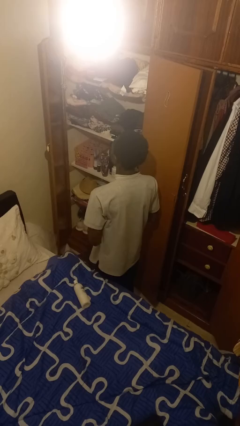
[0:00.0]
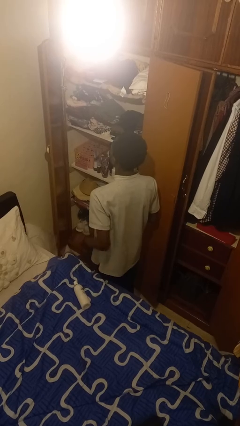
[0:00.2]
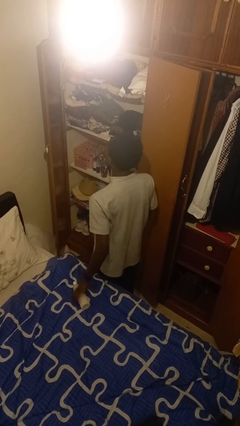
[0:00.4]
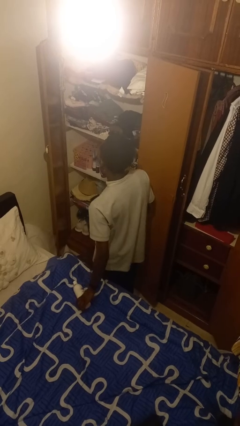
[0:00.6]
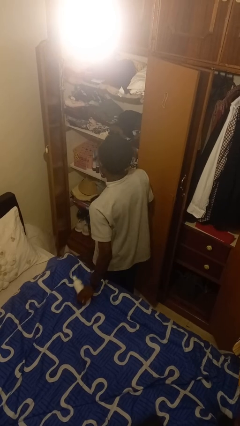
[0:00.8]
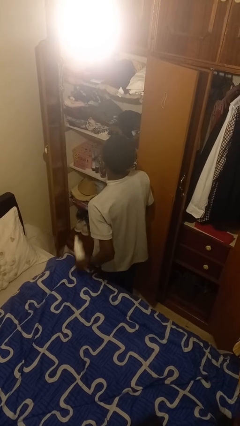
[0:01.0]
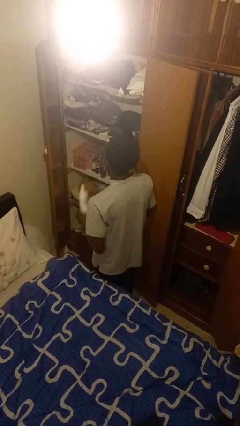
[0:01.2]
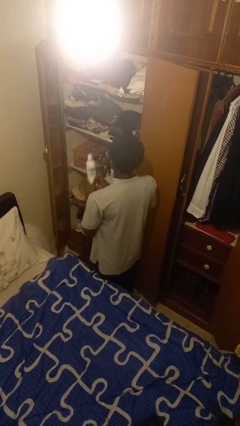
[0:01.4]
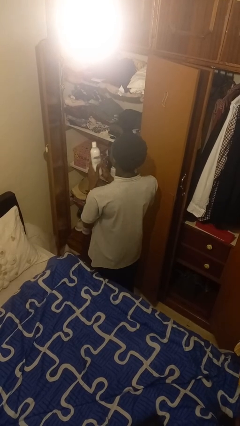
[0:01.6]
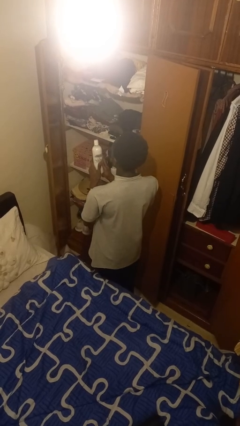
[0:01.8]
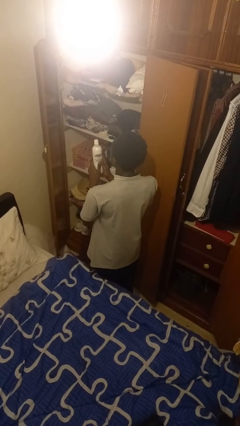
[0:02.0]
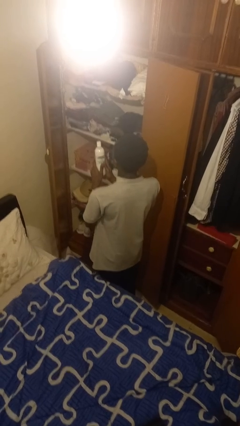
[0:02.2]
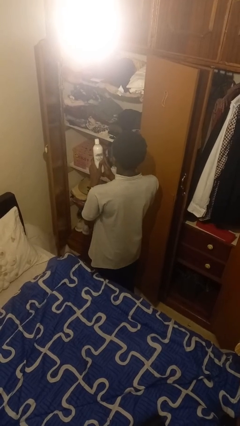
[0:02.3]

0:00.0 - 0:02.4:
person picks up object from bed

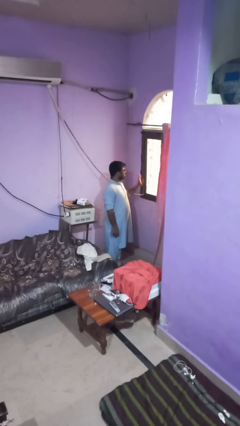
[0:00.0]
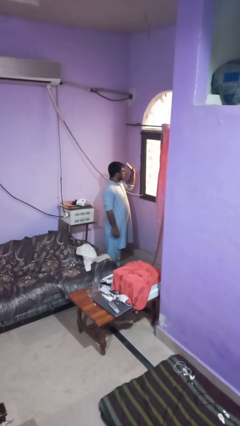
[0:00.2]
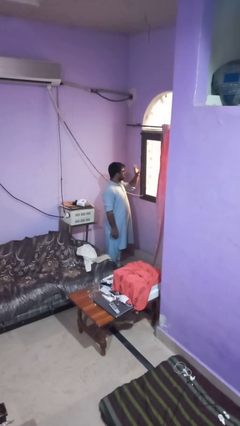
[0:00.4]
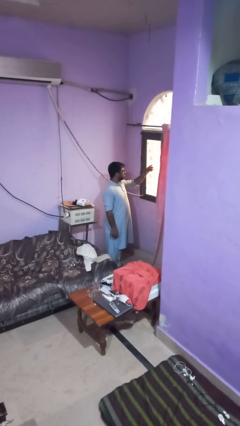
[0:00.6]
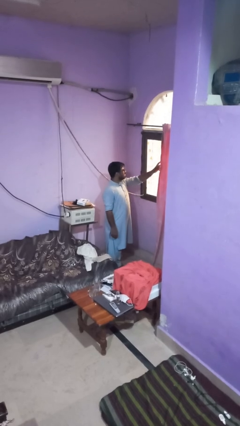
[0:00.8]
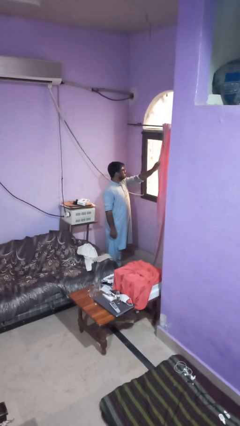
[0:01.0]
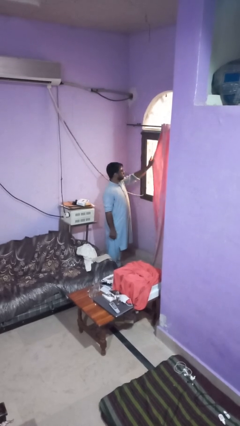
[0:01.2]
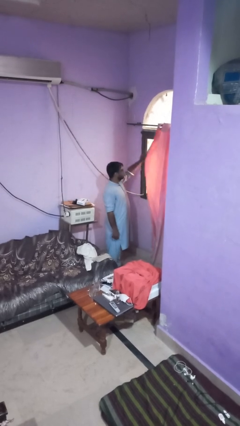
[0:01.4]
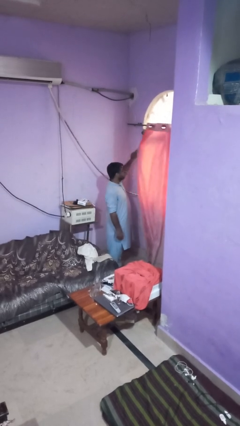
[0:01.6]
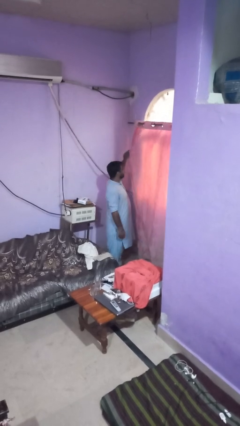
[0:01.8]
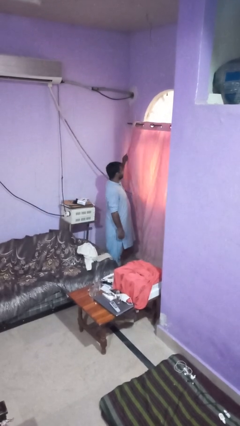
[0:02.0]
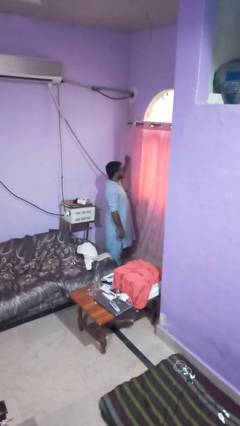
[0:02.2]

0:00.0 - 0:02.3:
person closes curtains

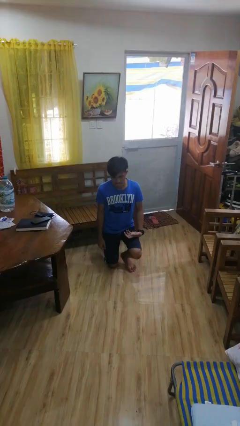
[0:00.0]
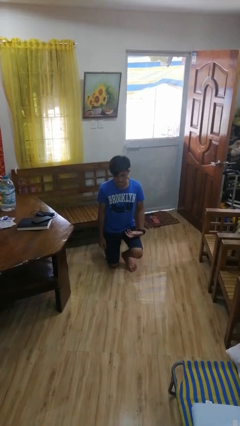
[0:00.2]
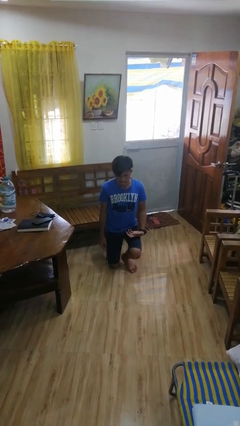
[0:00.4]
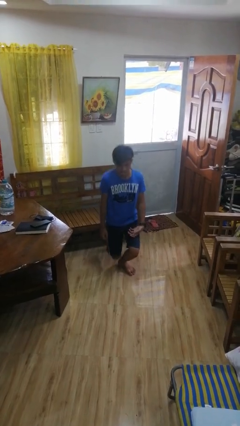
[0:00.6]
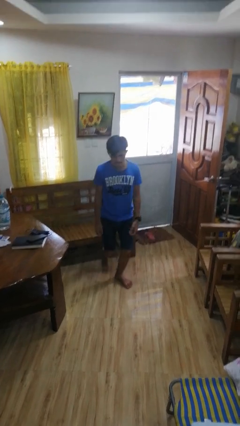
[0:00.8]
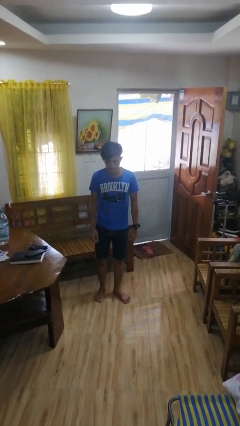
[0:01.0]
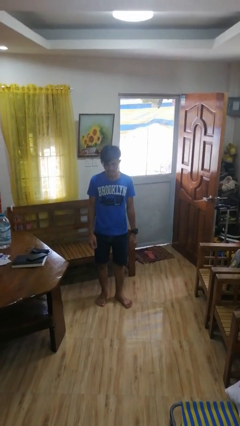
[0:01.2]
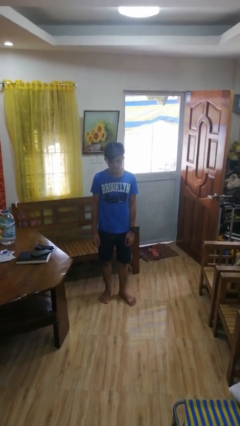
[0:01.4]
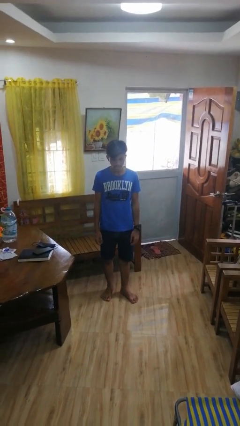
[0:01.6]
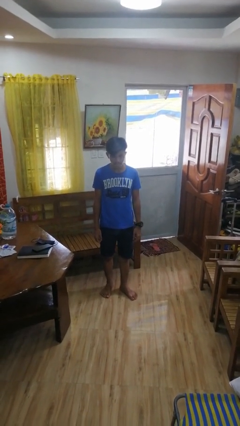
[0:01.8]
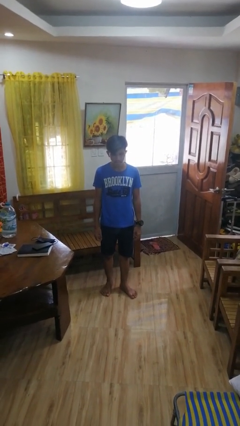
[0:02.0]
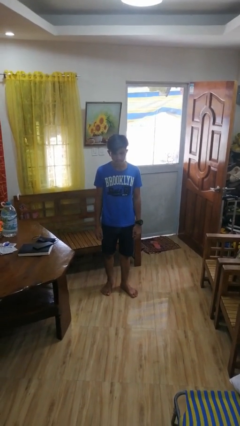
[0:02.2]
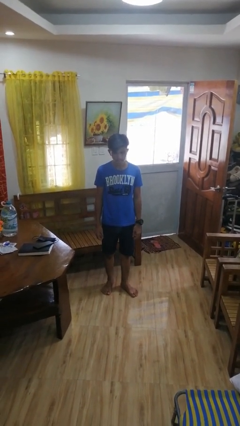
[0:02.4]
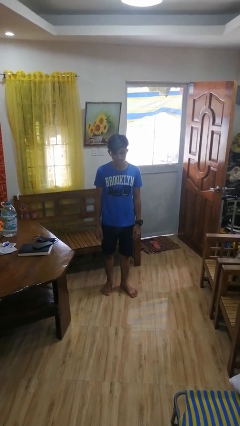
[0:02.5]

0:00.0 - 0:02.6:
person stands up from floor

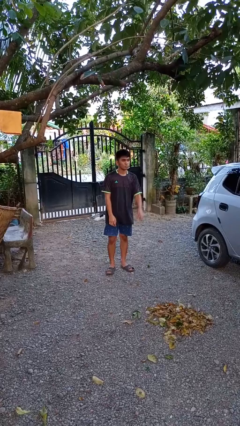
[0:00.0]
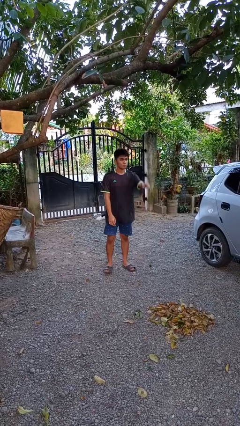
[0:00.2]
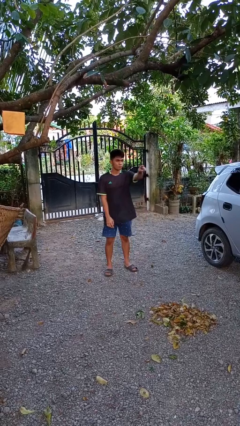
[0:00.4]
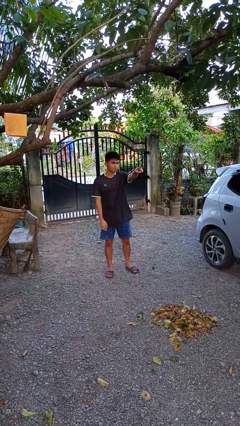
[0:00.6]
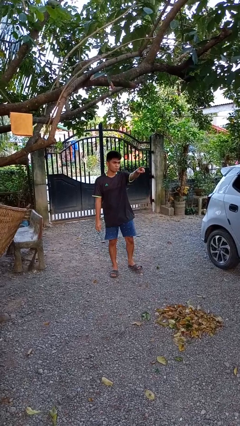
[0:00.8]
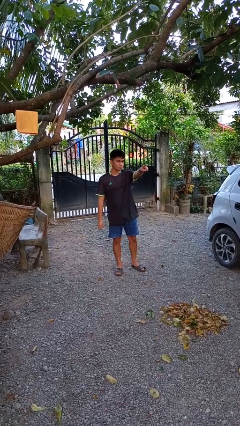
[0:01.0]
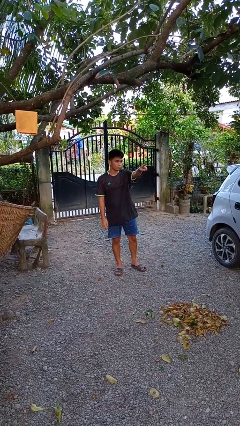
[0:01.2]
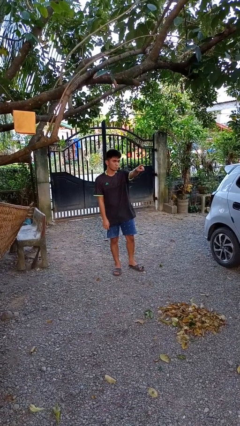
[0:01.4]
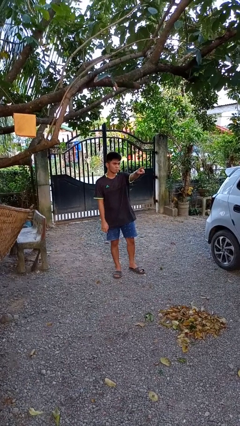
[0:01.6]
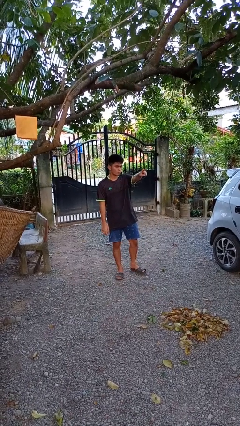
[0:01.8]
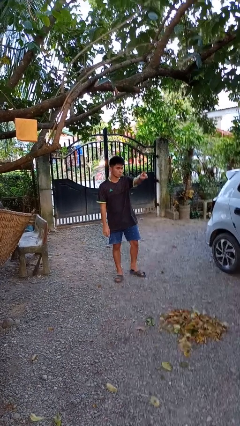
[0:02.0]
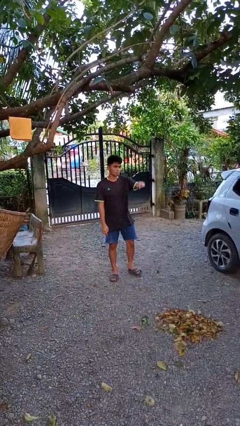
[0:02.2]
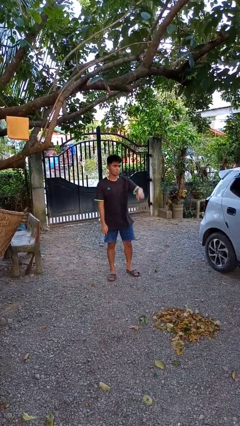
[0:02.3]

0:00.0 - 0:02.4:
person points at person

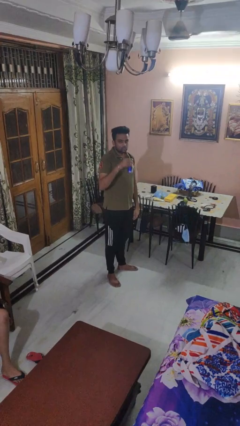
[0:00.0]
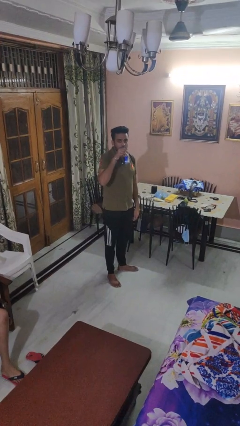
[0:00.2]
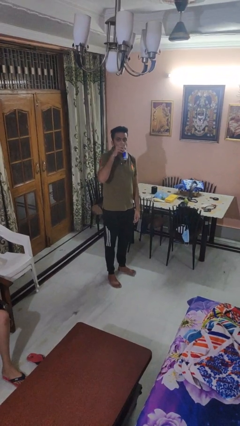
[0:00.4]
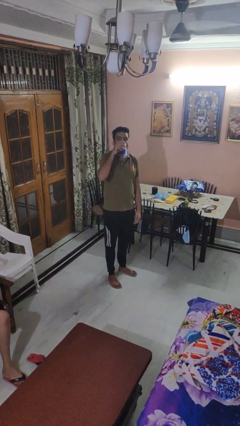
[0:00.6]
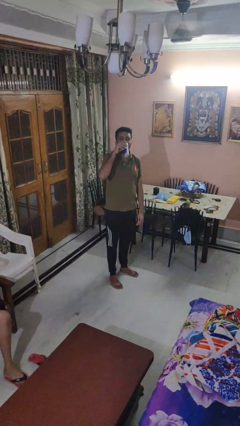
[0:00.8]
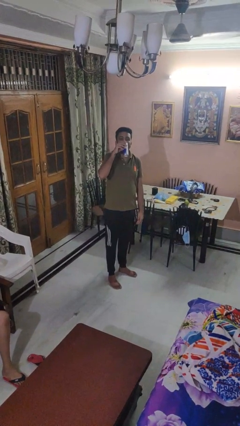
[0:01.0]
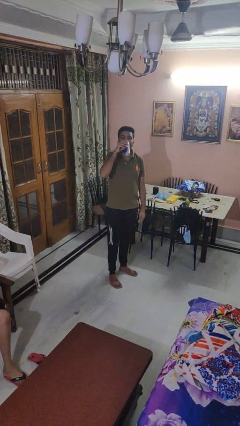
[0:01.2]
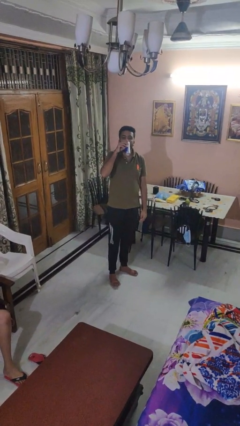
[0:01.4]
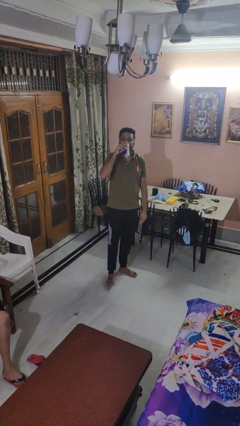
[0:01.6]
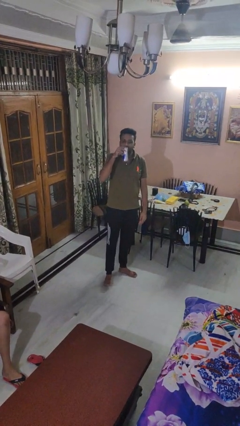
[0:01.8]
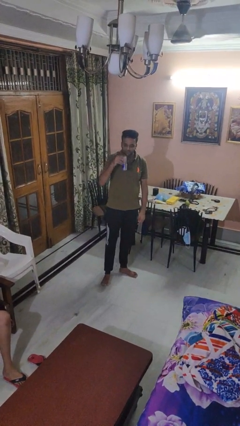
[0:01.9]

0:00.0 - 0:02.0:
person drinks from beverage can

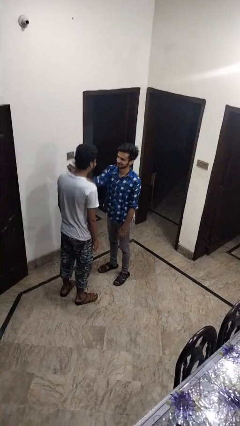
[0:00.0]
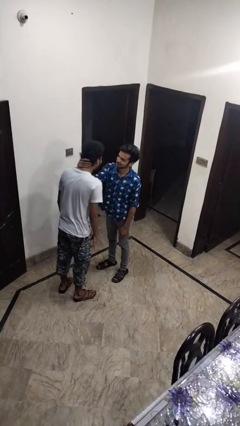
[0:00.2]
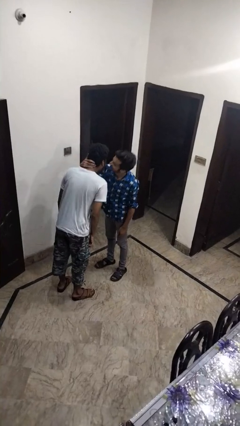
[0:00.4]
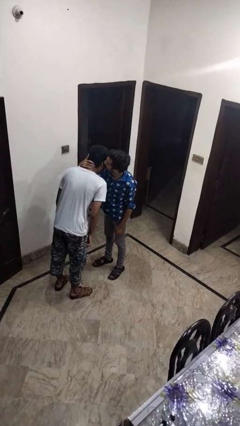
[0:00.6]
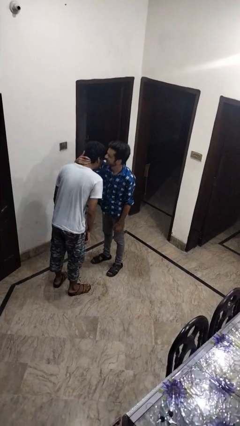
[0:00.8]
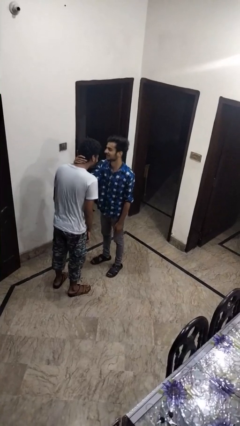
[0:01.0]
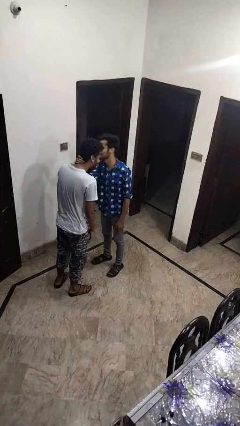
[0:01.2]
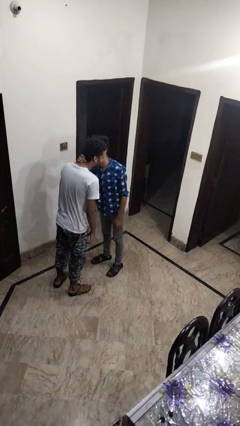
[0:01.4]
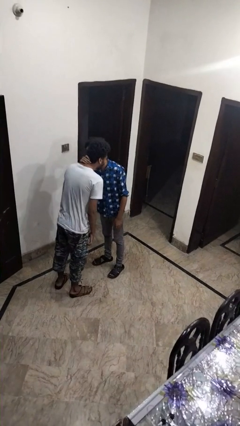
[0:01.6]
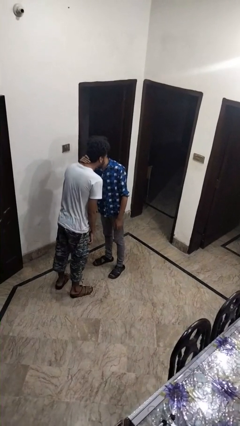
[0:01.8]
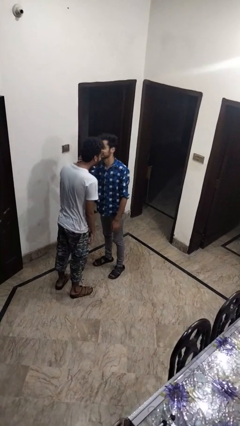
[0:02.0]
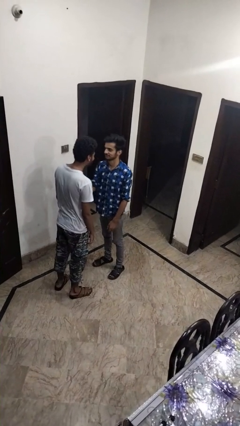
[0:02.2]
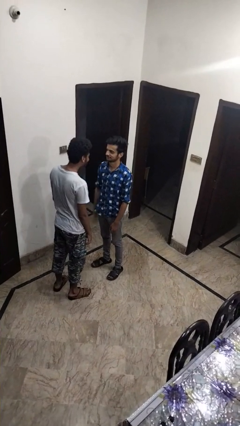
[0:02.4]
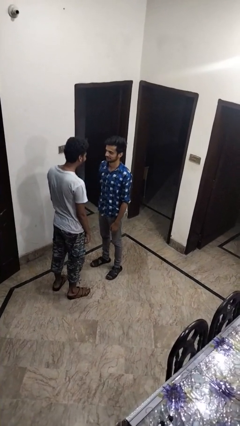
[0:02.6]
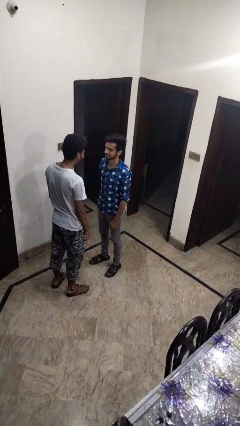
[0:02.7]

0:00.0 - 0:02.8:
person kisses cheek of person

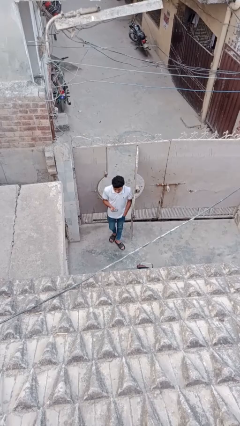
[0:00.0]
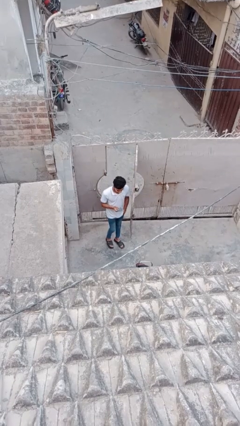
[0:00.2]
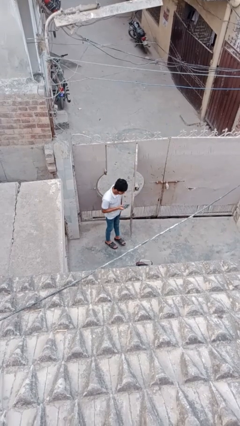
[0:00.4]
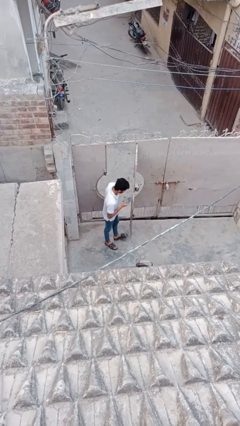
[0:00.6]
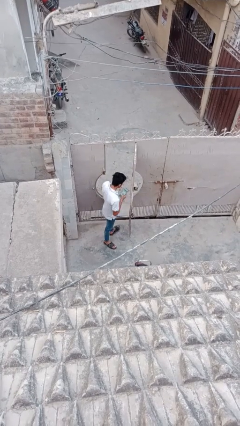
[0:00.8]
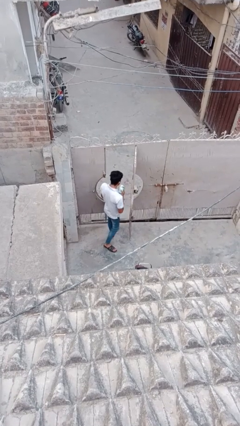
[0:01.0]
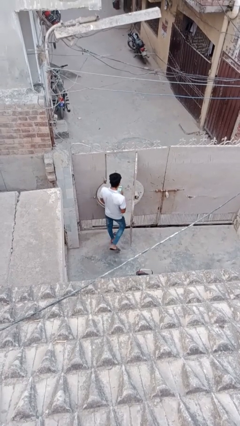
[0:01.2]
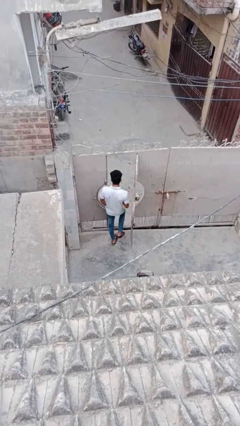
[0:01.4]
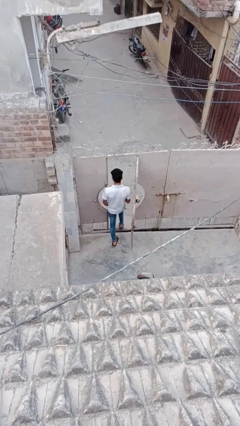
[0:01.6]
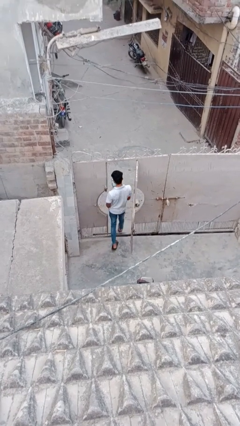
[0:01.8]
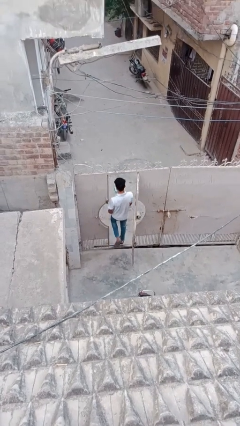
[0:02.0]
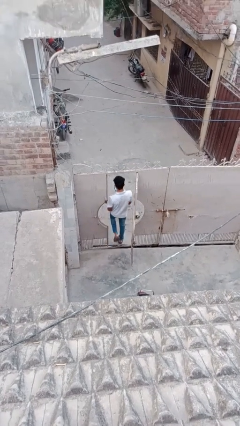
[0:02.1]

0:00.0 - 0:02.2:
person exits scene through structure

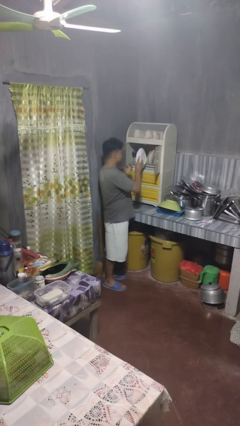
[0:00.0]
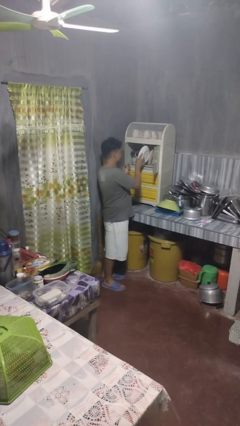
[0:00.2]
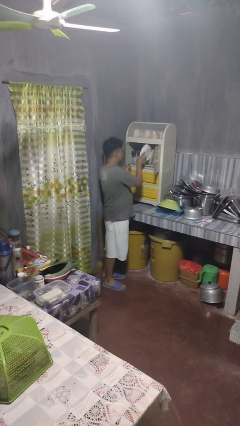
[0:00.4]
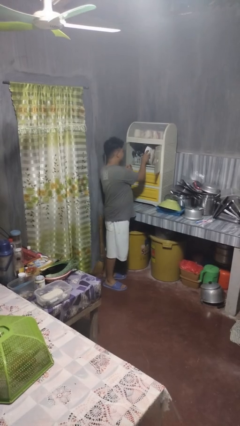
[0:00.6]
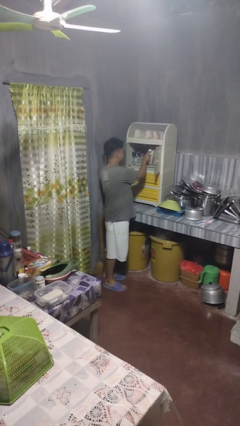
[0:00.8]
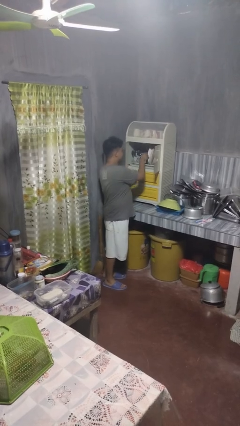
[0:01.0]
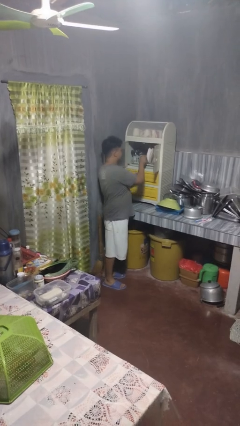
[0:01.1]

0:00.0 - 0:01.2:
person puts object in cabinet
